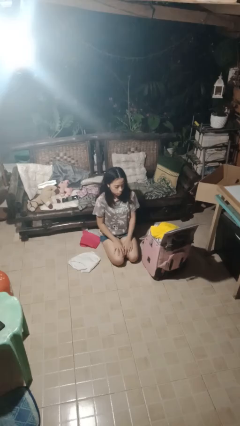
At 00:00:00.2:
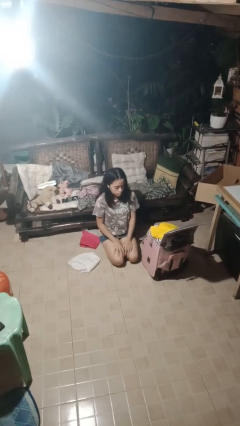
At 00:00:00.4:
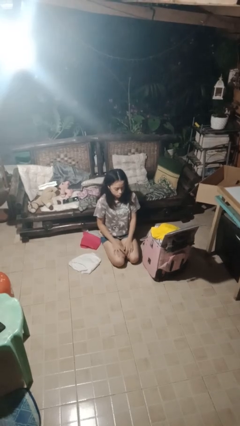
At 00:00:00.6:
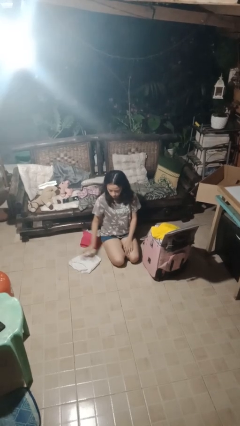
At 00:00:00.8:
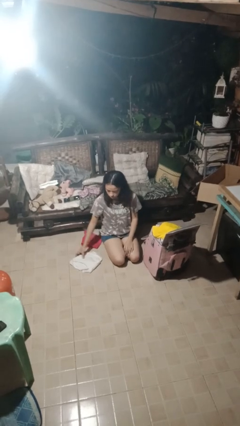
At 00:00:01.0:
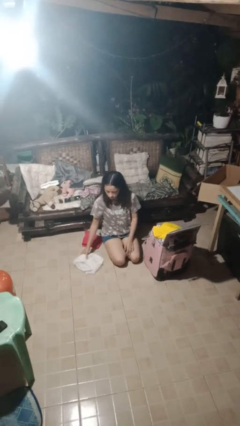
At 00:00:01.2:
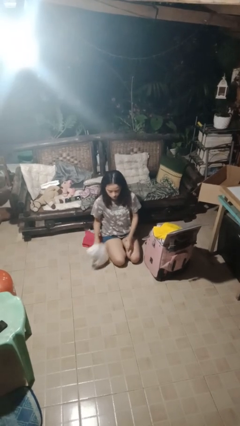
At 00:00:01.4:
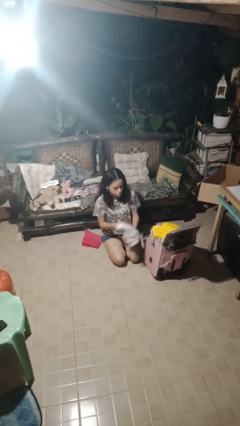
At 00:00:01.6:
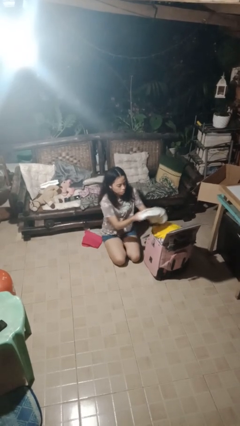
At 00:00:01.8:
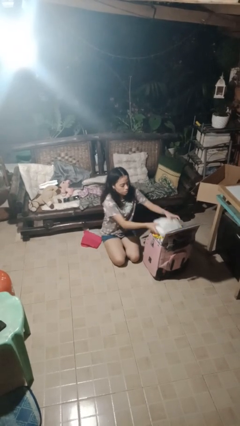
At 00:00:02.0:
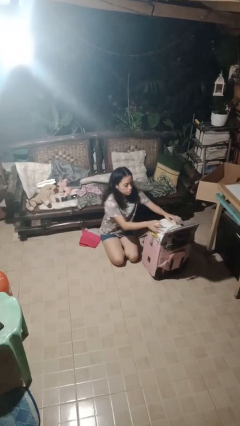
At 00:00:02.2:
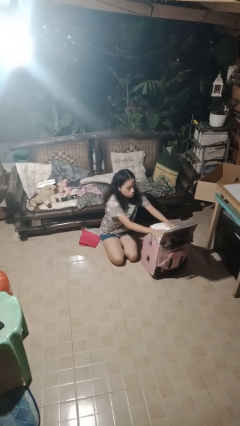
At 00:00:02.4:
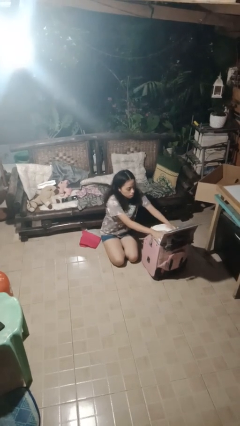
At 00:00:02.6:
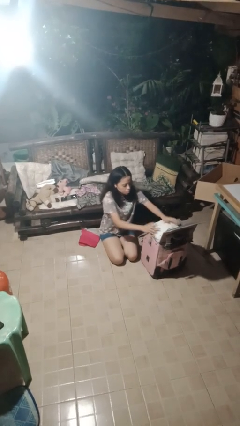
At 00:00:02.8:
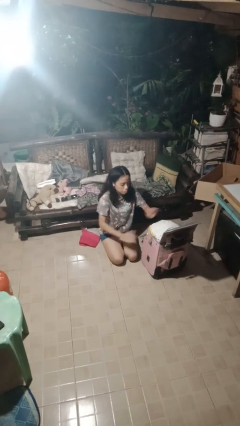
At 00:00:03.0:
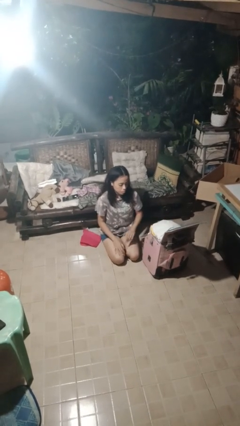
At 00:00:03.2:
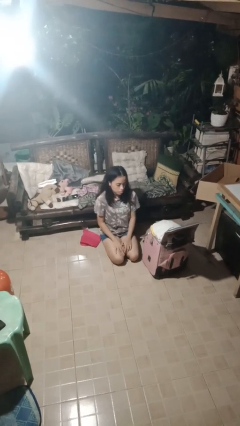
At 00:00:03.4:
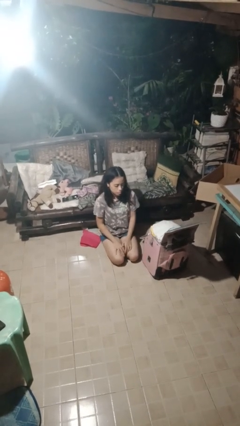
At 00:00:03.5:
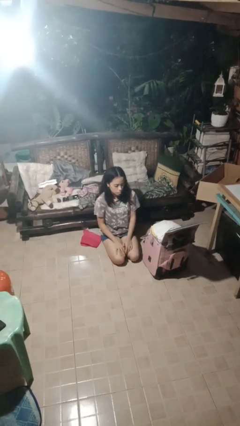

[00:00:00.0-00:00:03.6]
person loads clothes into suitcase

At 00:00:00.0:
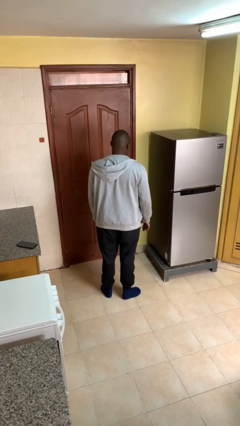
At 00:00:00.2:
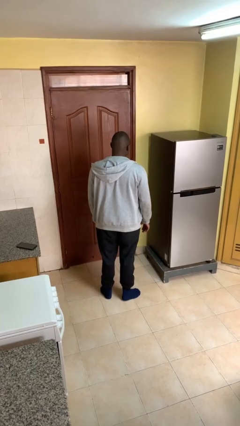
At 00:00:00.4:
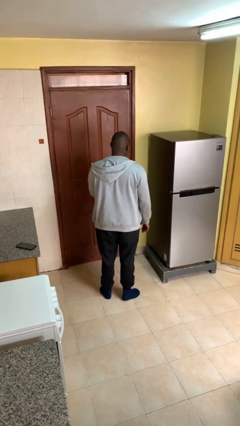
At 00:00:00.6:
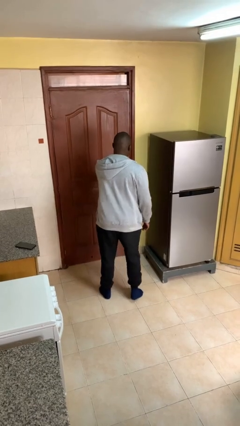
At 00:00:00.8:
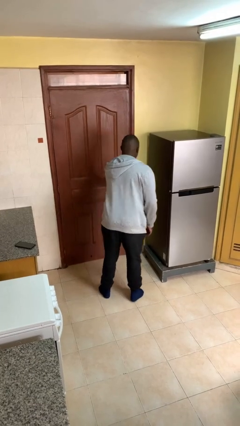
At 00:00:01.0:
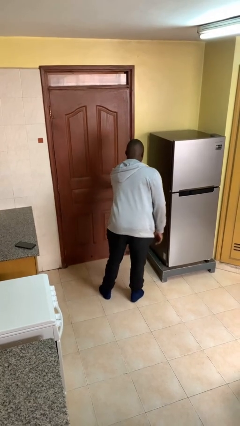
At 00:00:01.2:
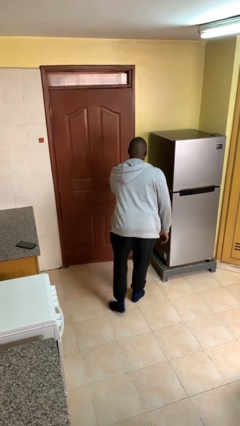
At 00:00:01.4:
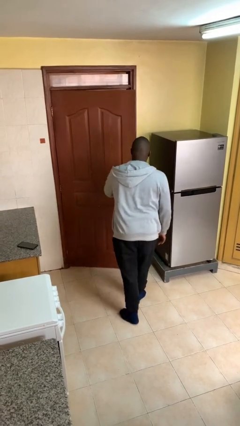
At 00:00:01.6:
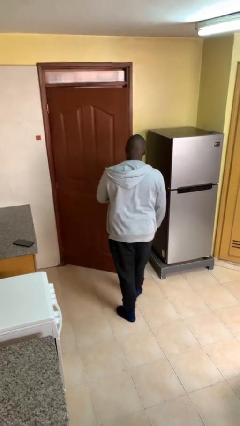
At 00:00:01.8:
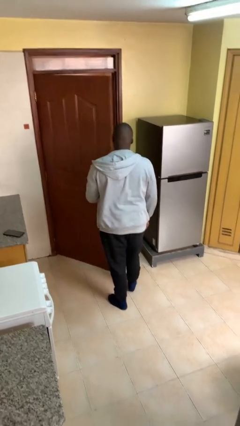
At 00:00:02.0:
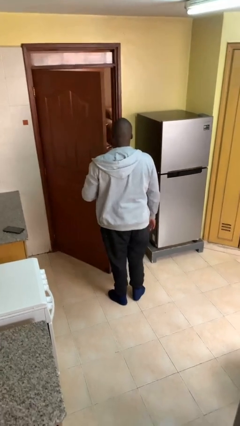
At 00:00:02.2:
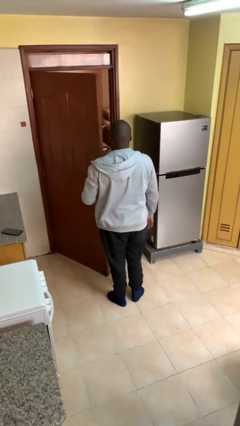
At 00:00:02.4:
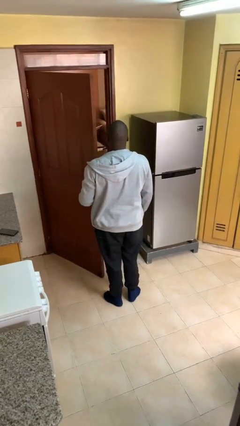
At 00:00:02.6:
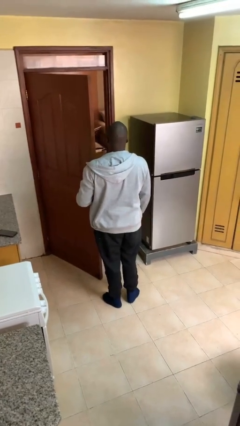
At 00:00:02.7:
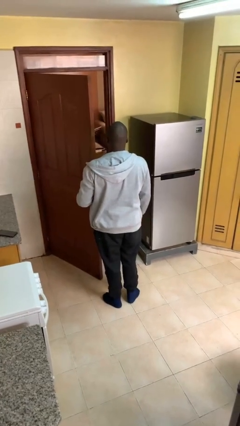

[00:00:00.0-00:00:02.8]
person opens facility door

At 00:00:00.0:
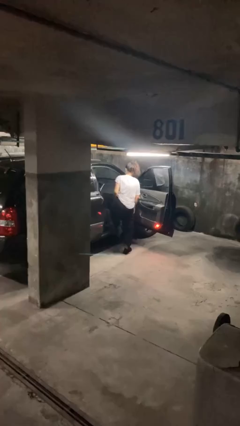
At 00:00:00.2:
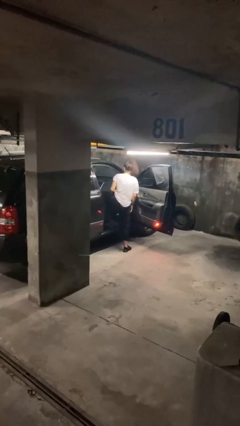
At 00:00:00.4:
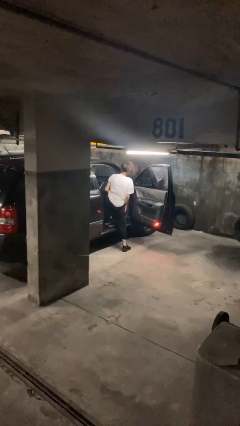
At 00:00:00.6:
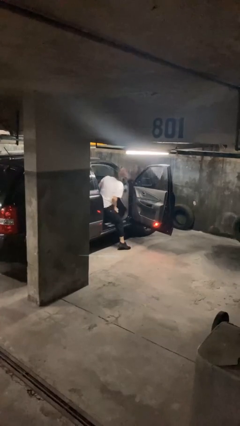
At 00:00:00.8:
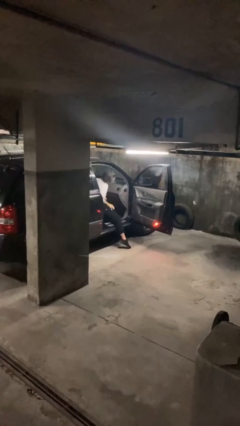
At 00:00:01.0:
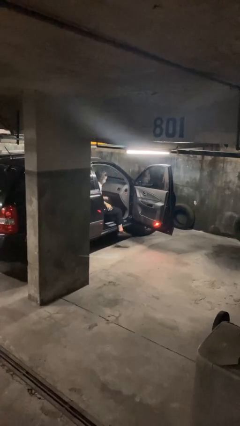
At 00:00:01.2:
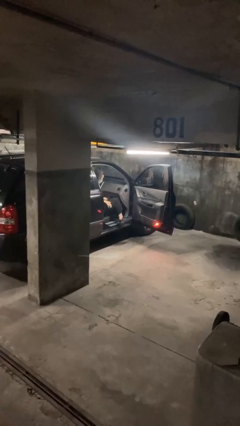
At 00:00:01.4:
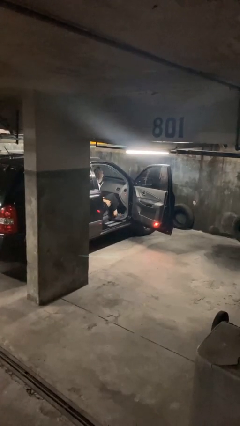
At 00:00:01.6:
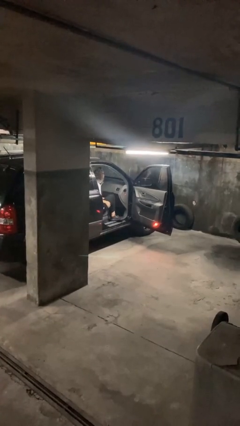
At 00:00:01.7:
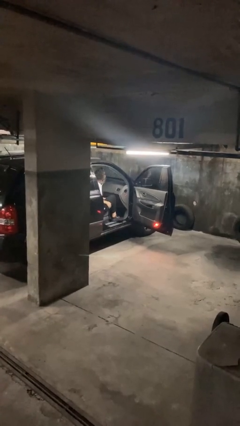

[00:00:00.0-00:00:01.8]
person enters car

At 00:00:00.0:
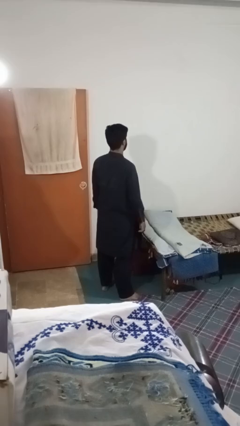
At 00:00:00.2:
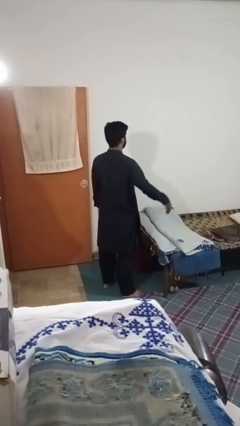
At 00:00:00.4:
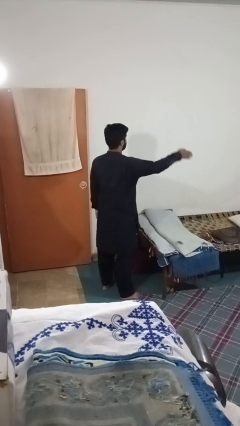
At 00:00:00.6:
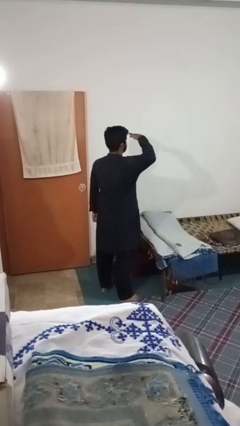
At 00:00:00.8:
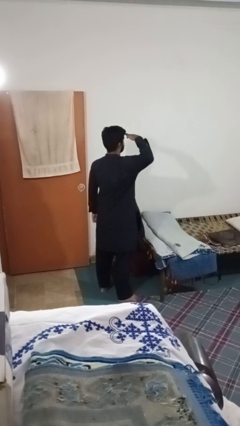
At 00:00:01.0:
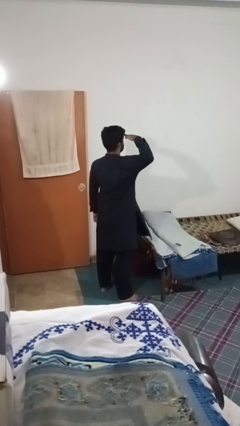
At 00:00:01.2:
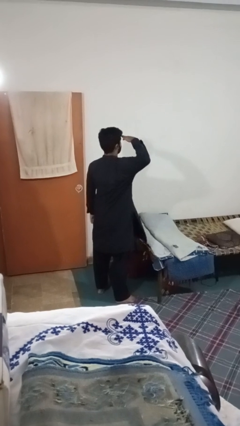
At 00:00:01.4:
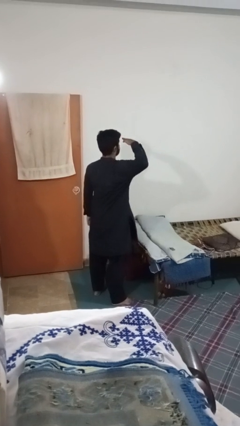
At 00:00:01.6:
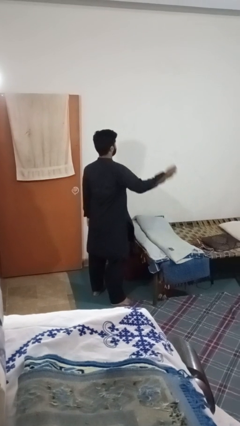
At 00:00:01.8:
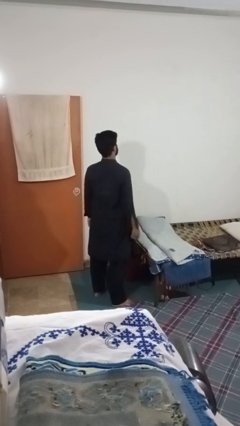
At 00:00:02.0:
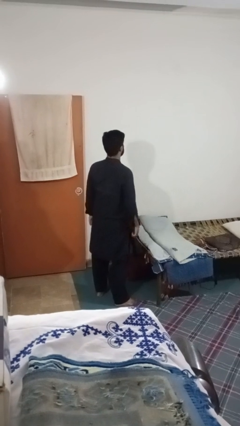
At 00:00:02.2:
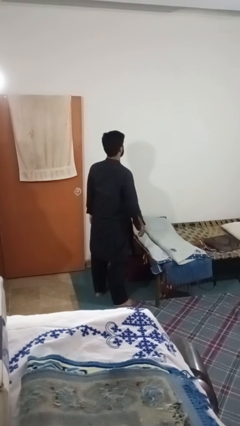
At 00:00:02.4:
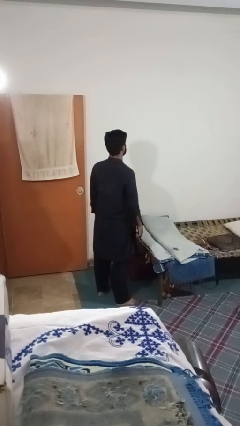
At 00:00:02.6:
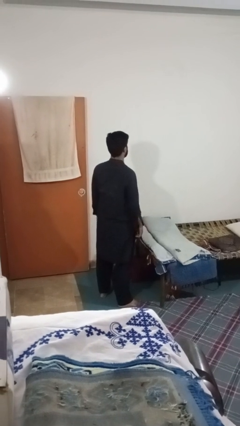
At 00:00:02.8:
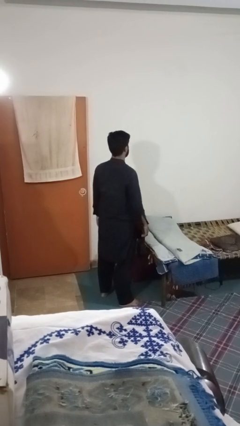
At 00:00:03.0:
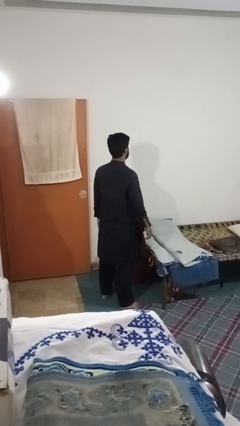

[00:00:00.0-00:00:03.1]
person salutes

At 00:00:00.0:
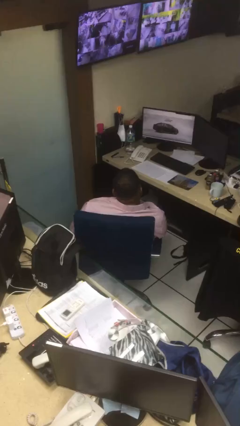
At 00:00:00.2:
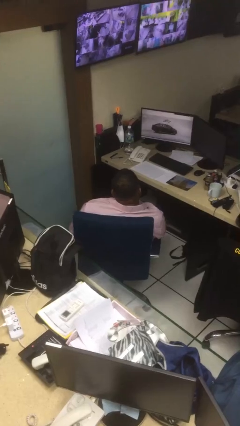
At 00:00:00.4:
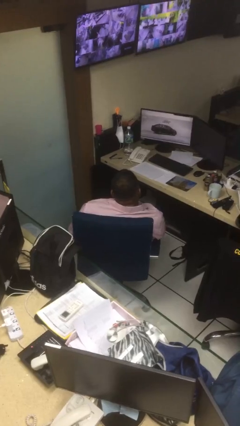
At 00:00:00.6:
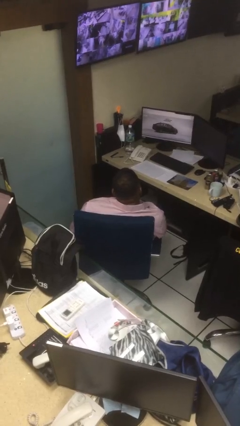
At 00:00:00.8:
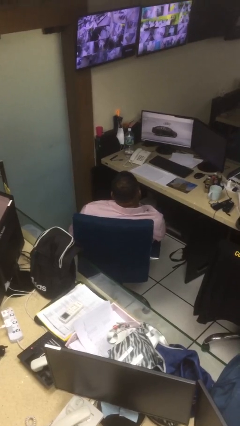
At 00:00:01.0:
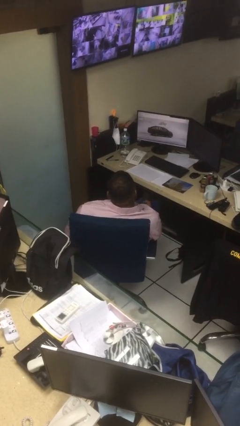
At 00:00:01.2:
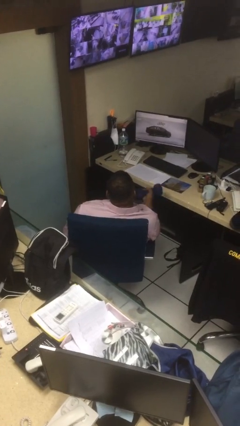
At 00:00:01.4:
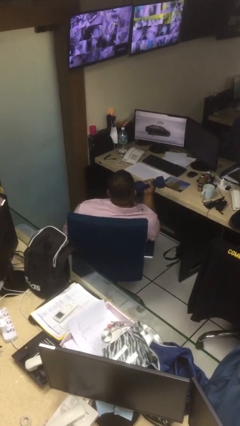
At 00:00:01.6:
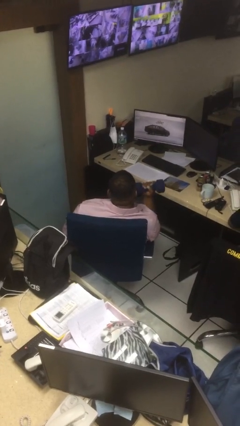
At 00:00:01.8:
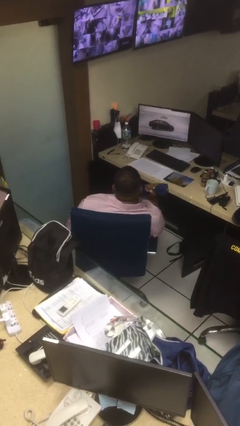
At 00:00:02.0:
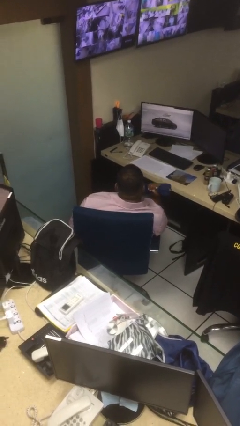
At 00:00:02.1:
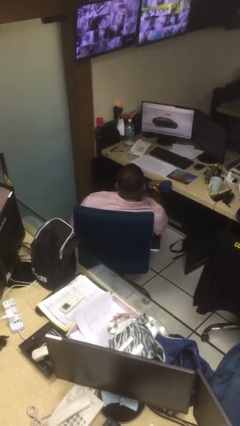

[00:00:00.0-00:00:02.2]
person lifts dumbbells

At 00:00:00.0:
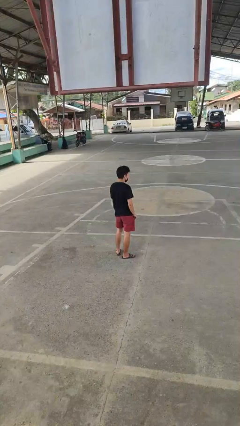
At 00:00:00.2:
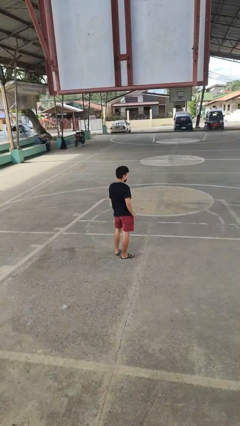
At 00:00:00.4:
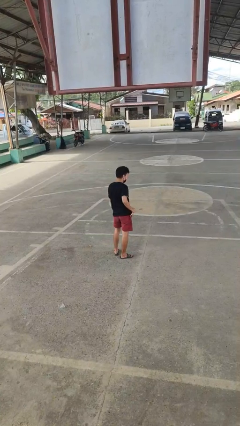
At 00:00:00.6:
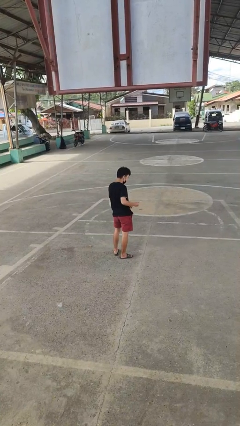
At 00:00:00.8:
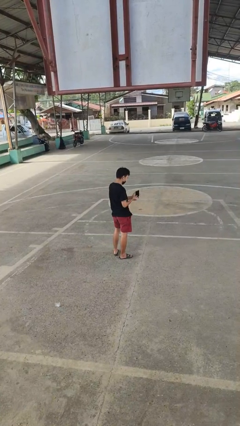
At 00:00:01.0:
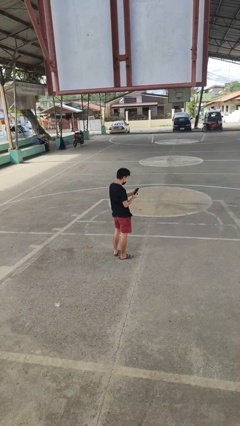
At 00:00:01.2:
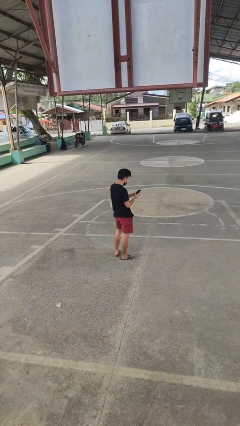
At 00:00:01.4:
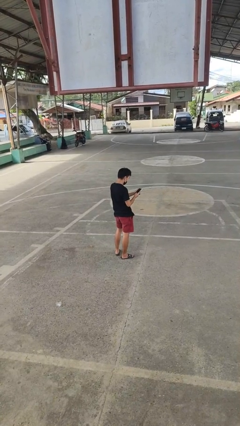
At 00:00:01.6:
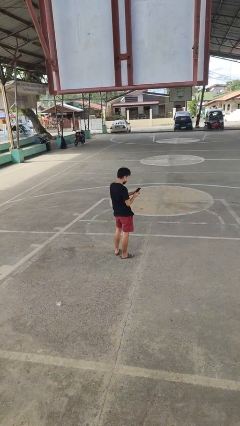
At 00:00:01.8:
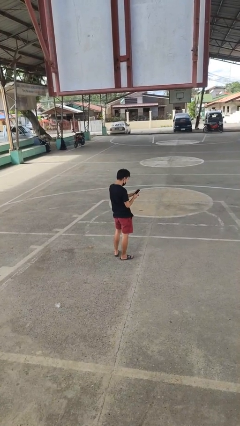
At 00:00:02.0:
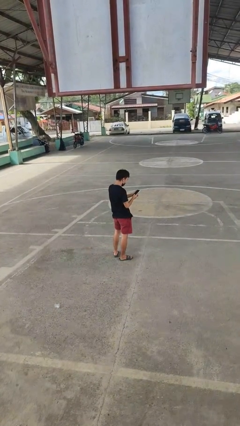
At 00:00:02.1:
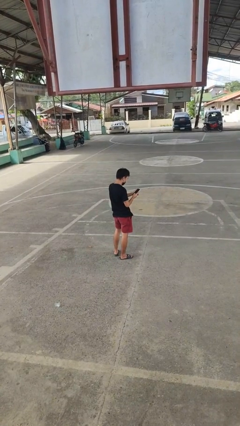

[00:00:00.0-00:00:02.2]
person takes phone from pocket

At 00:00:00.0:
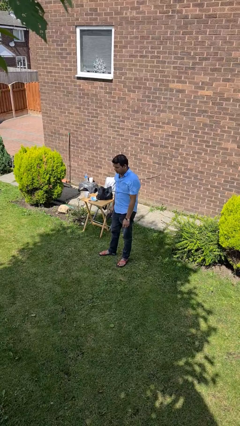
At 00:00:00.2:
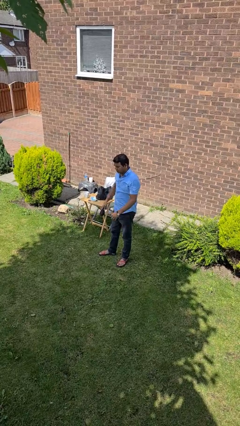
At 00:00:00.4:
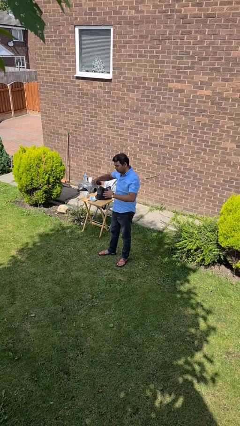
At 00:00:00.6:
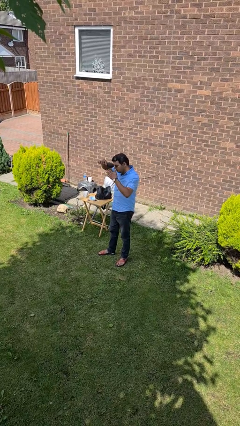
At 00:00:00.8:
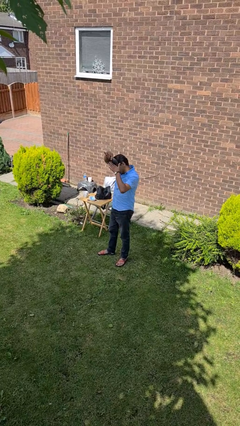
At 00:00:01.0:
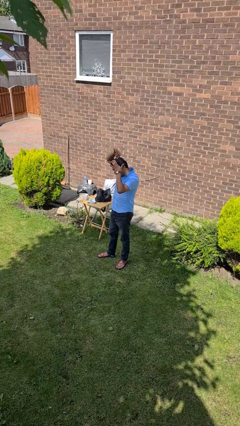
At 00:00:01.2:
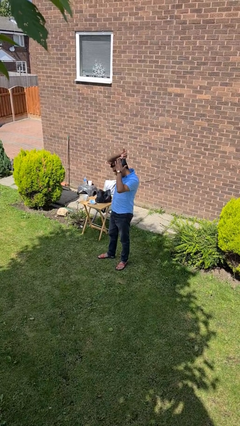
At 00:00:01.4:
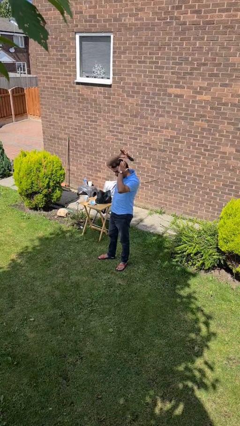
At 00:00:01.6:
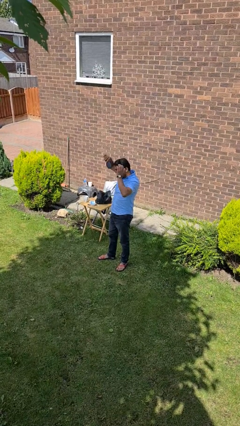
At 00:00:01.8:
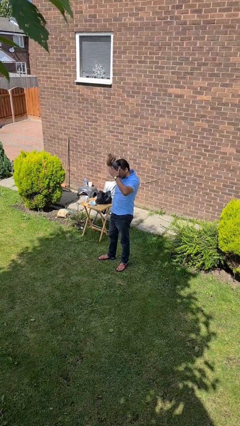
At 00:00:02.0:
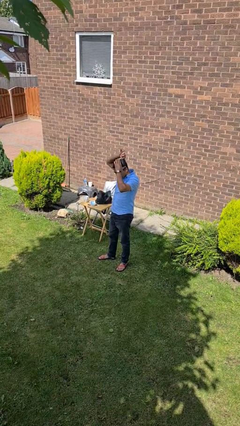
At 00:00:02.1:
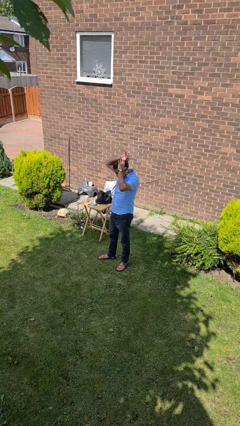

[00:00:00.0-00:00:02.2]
person brushes hair
